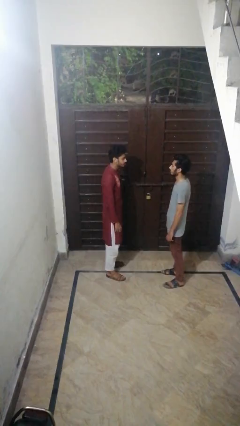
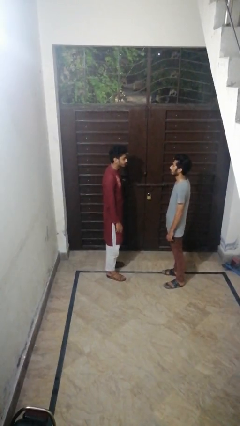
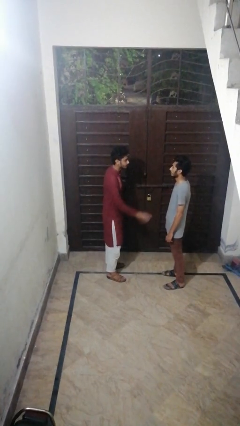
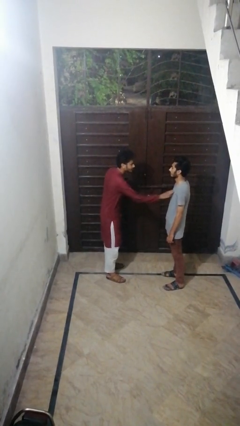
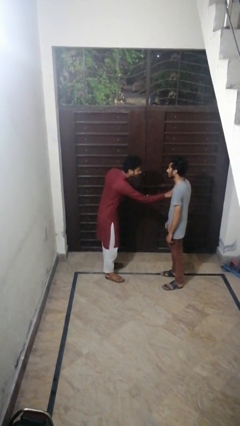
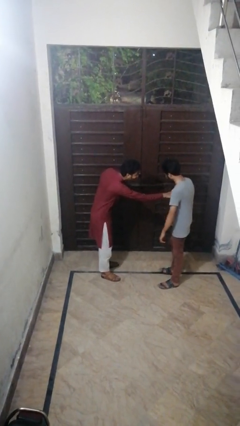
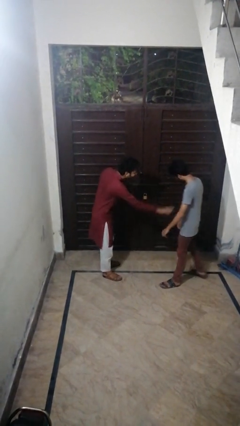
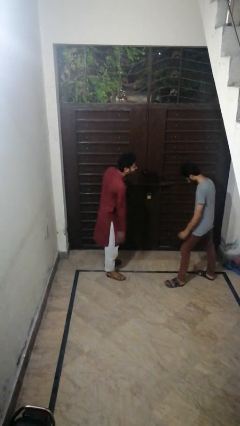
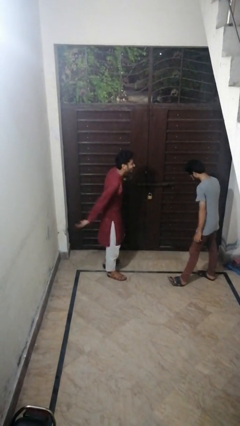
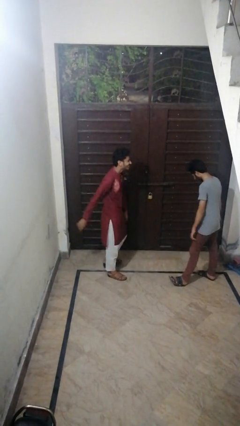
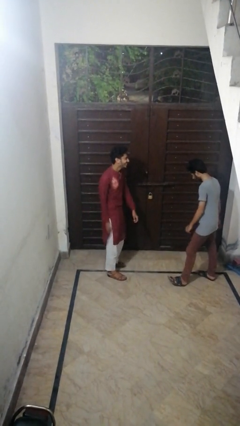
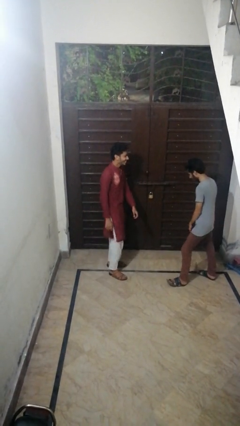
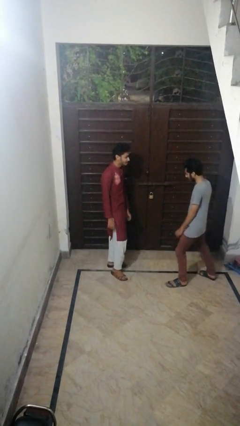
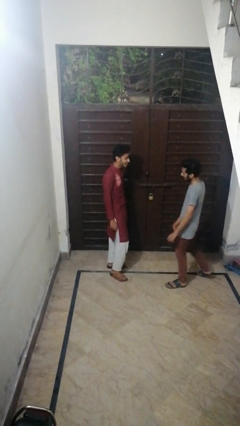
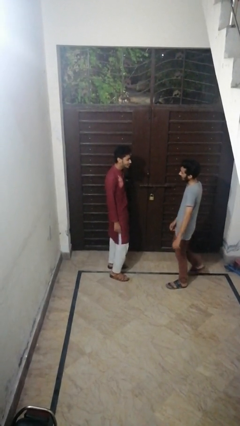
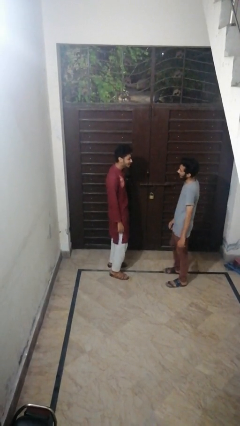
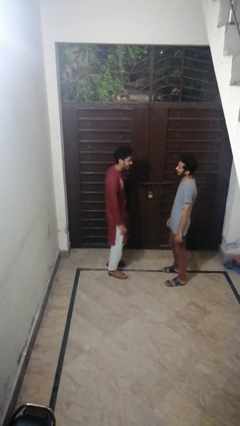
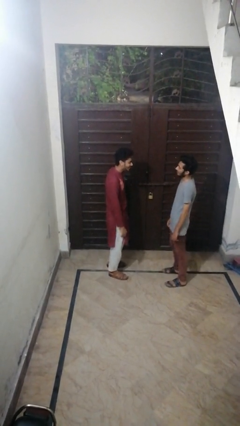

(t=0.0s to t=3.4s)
person shoves person

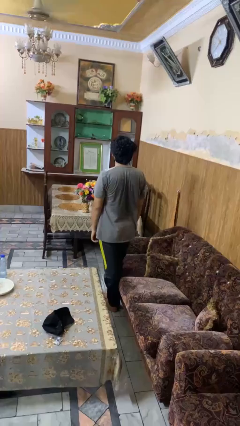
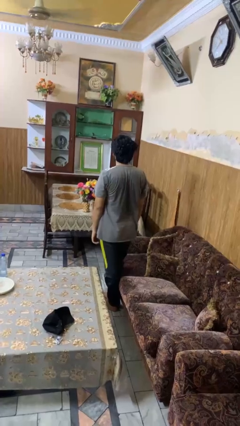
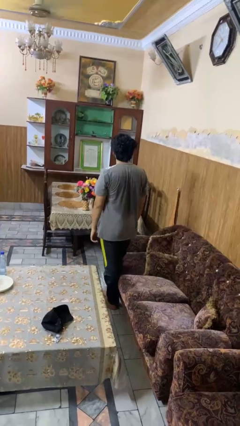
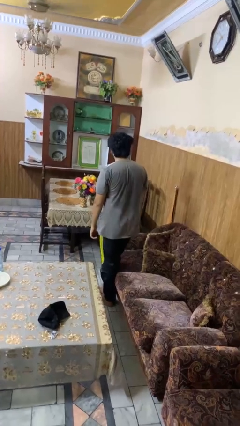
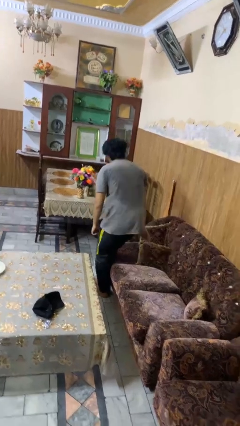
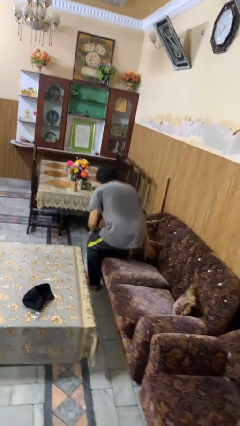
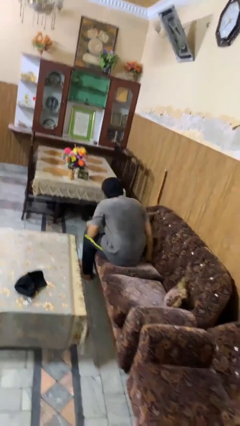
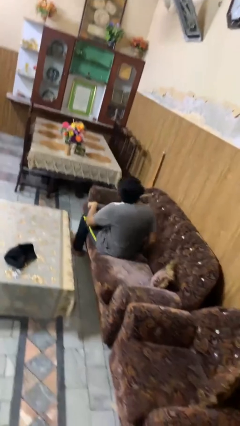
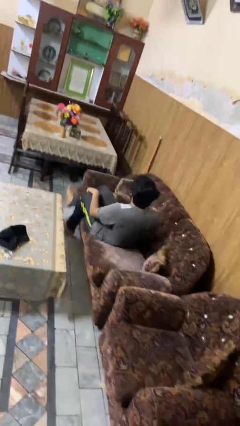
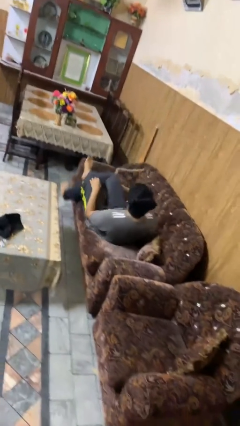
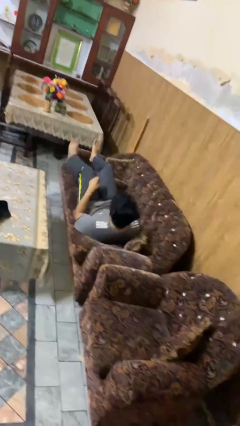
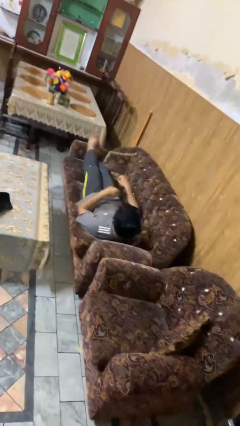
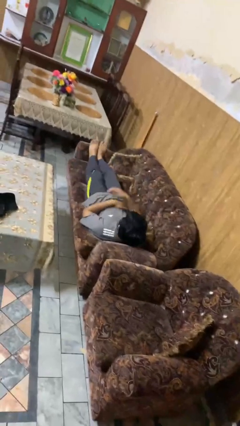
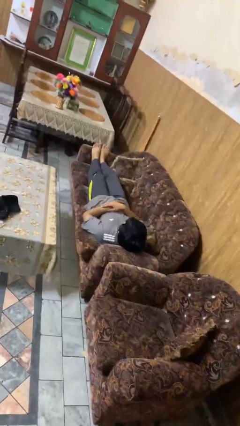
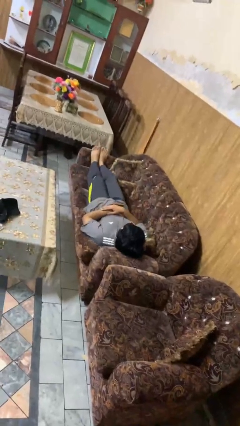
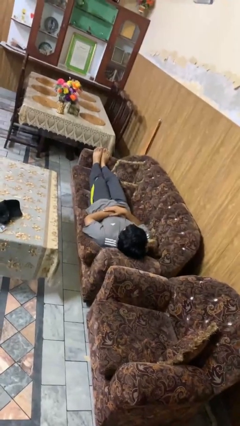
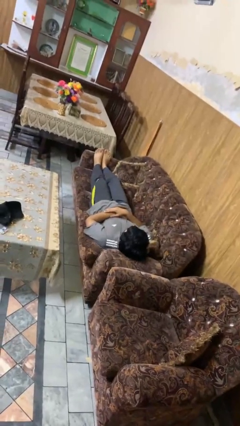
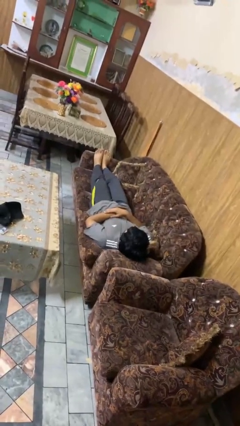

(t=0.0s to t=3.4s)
person lies down on couch

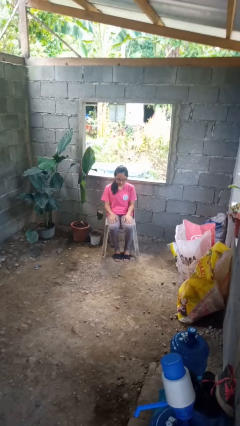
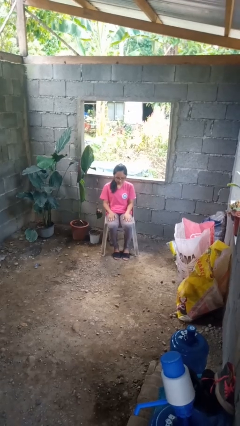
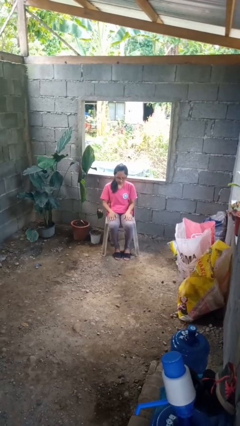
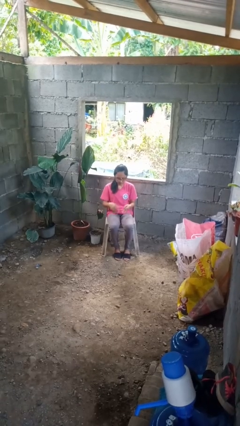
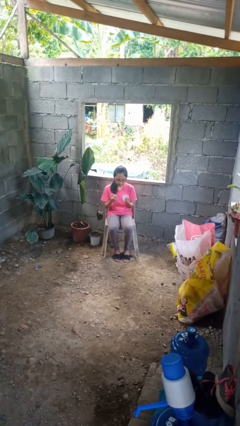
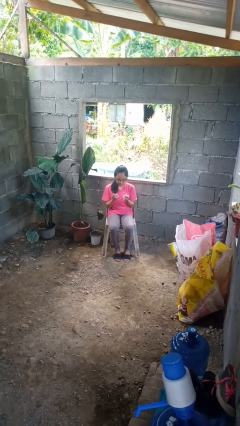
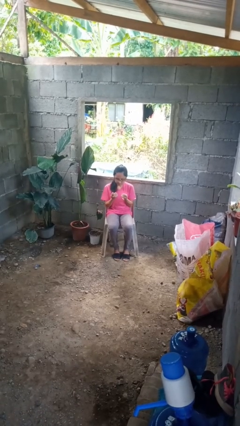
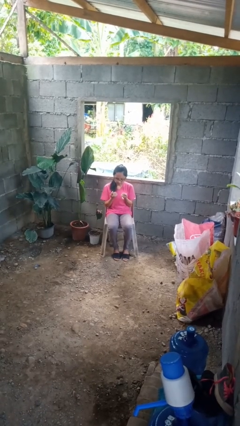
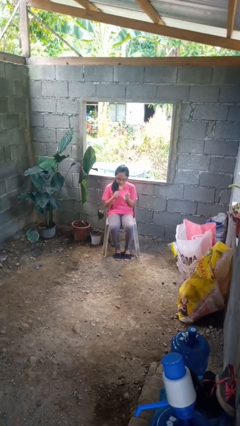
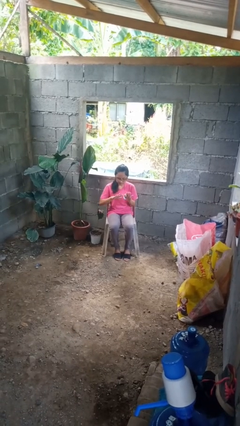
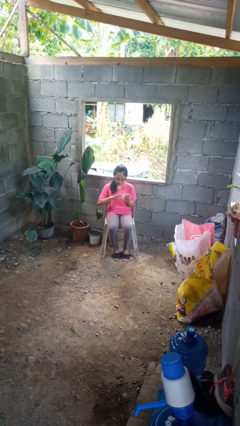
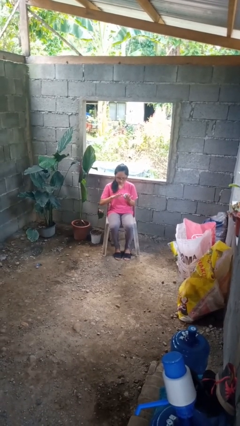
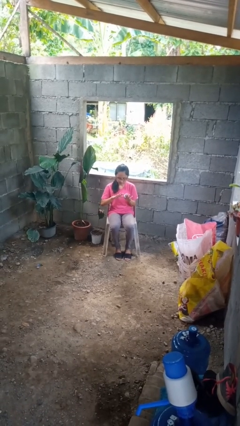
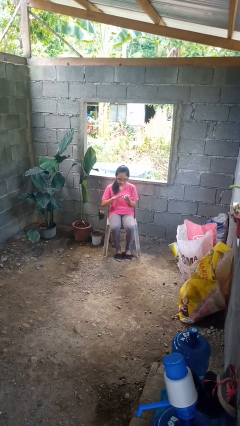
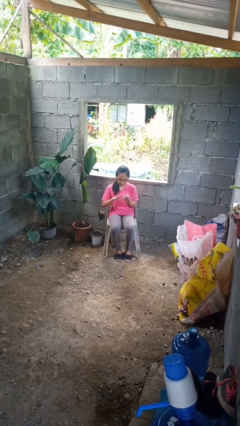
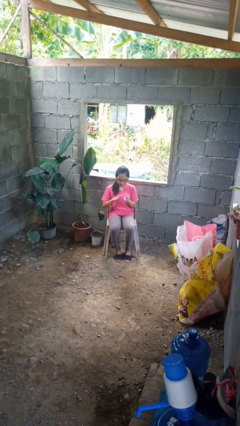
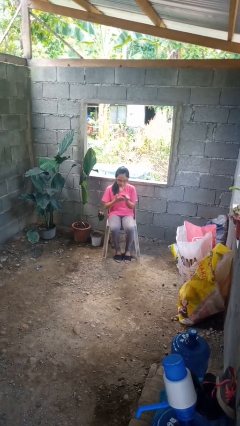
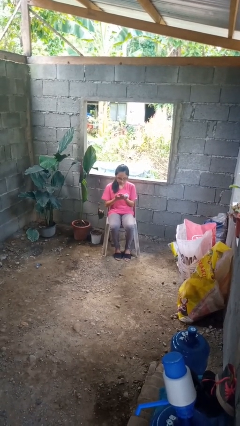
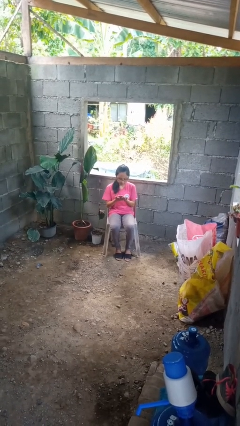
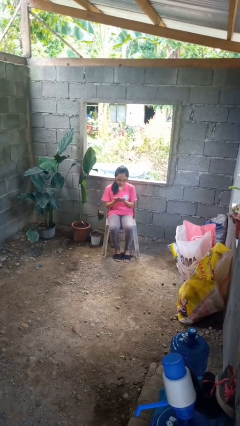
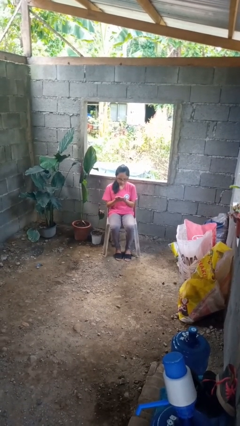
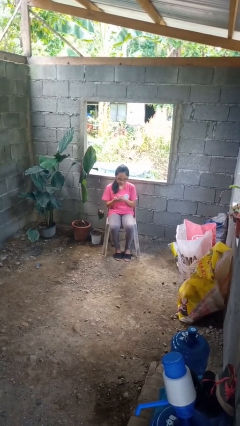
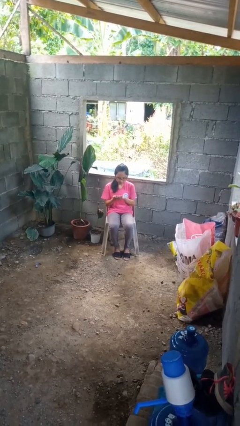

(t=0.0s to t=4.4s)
person looks at hands in lap

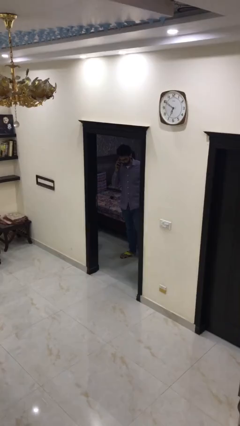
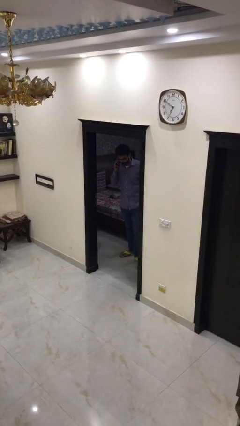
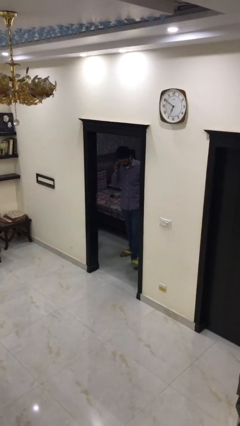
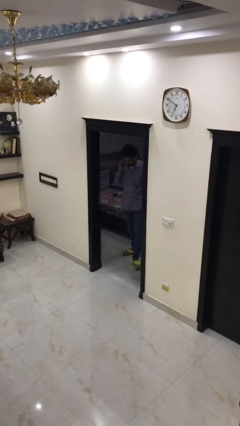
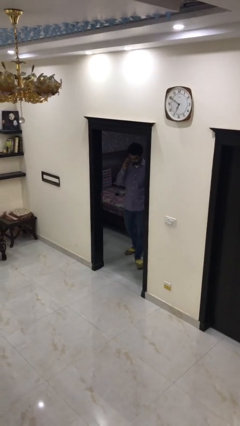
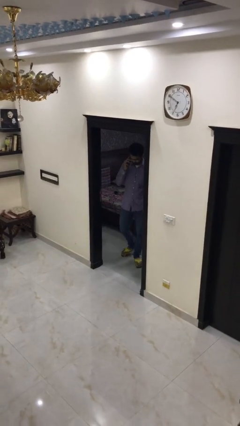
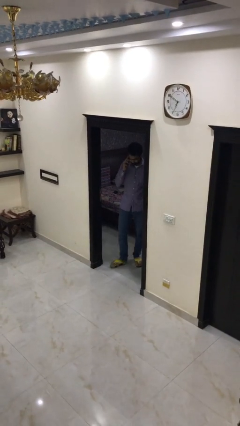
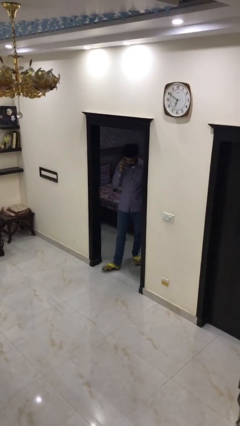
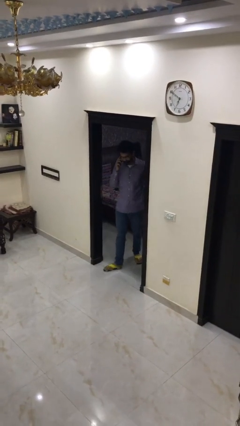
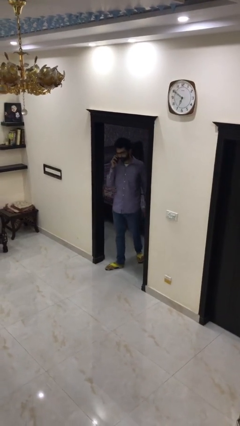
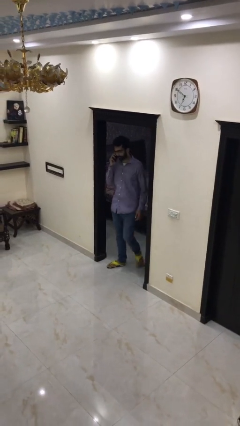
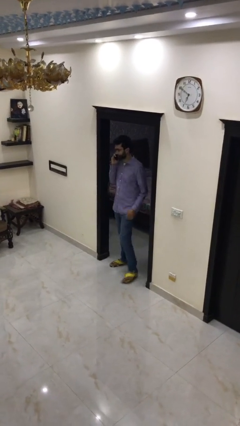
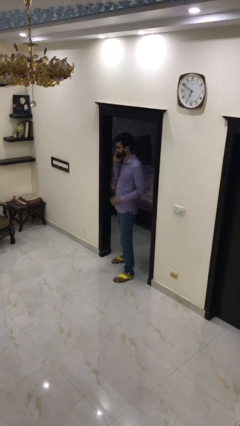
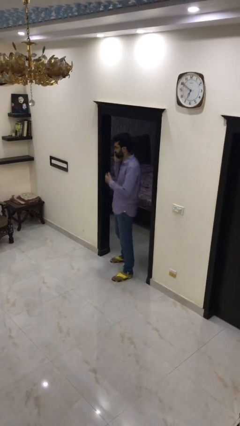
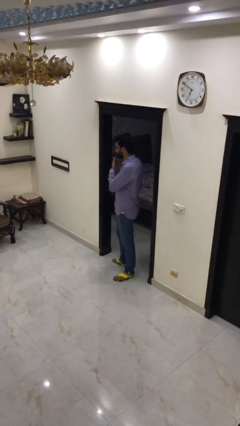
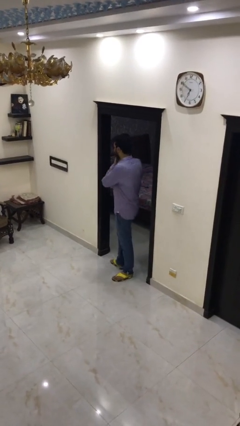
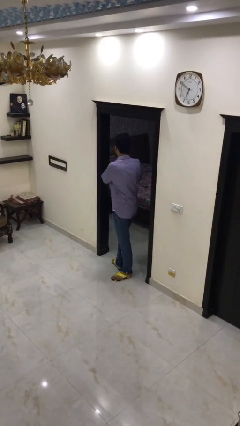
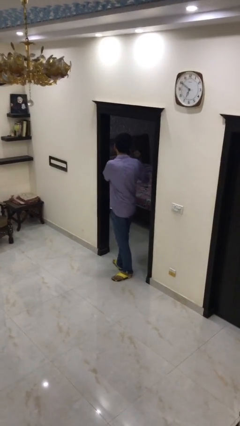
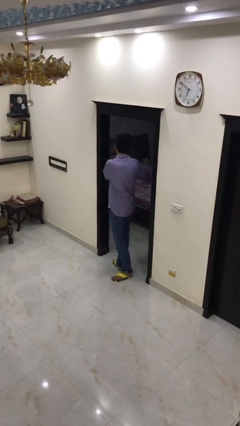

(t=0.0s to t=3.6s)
person enters scene through structure

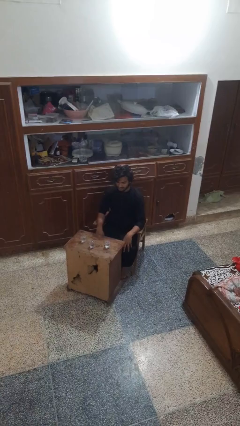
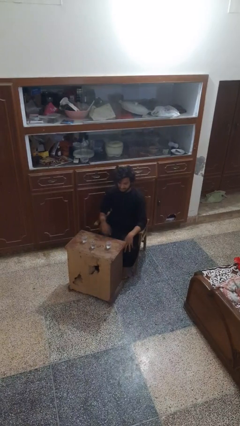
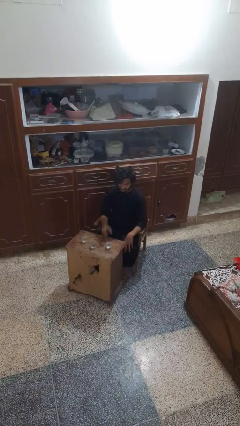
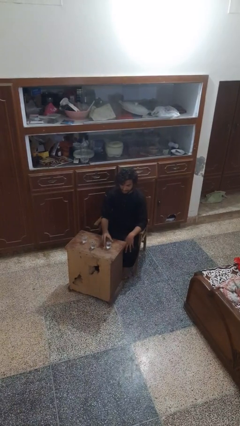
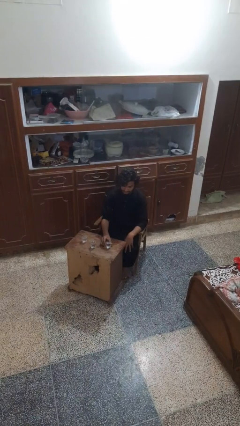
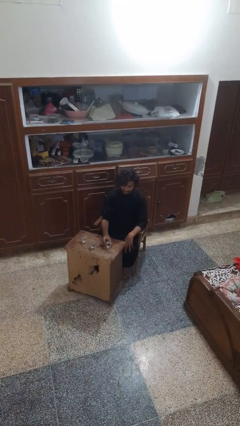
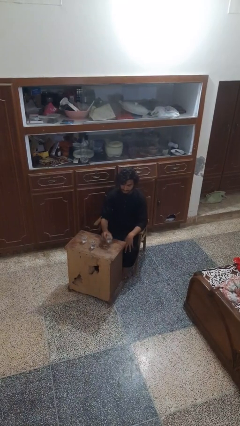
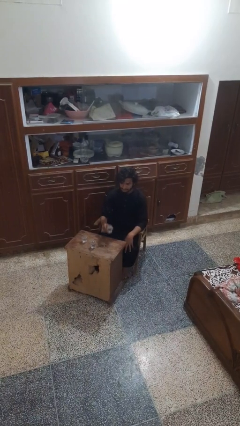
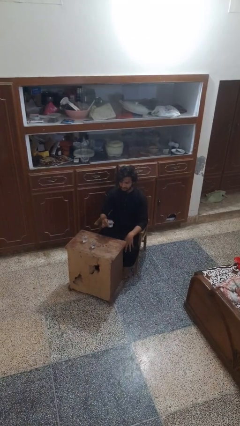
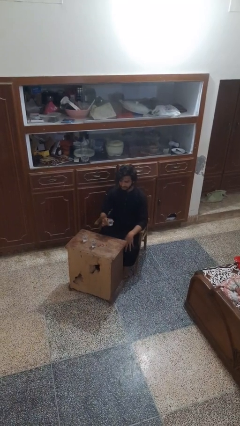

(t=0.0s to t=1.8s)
person picks up object from table

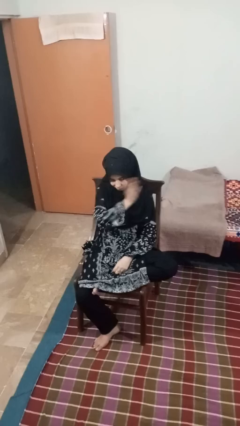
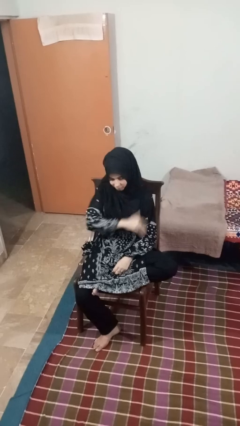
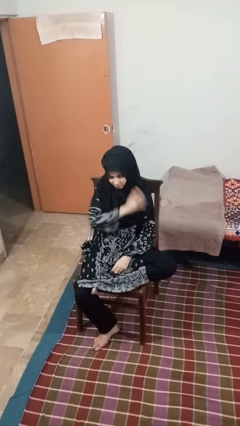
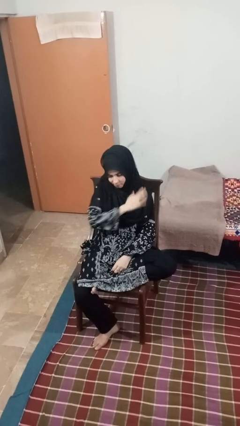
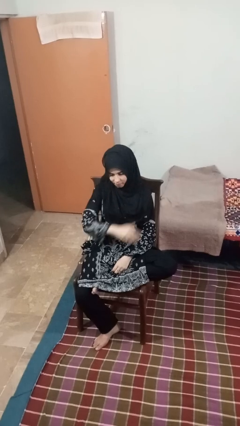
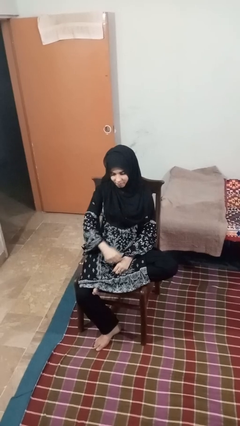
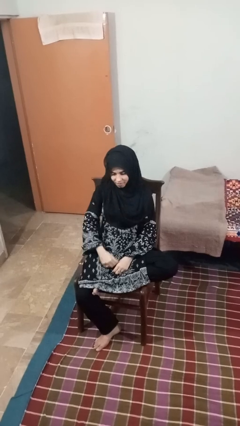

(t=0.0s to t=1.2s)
person swats bug
